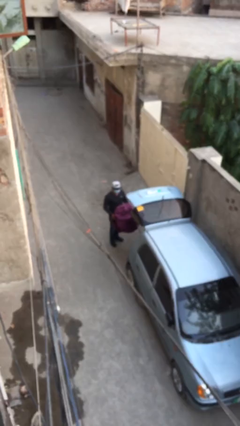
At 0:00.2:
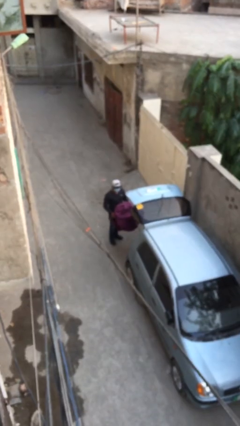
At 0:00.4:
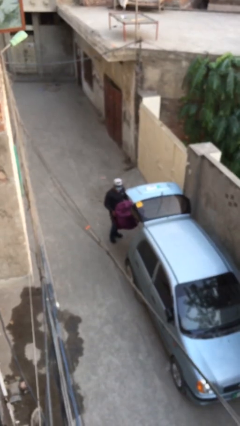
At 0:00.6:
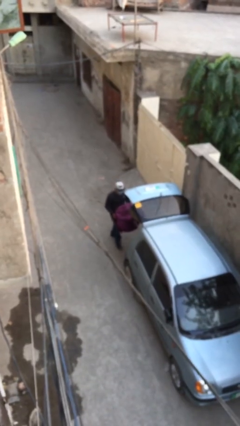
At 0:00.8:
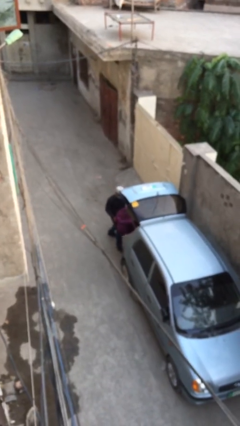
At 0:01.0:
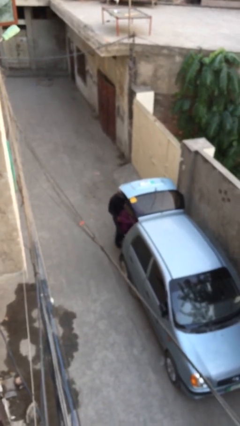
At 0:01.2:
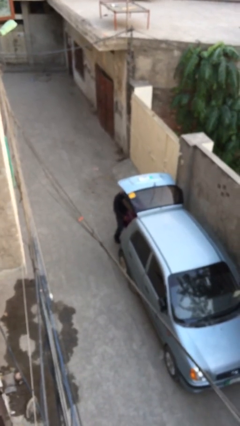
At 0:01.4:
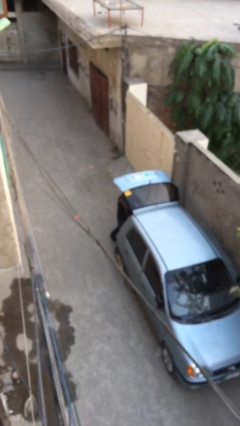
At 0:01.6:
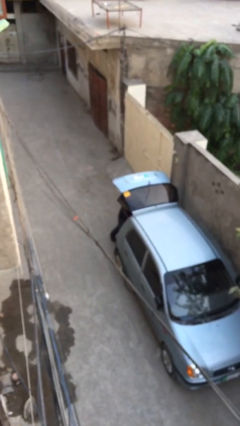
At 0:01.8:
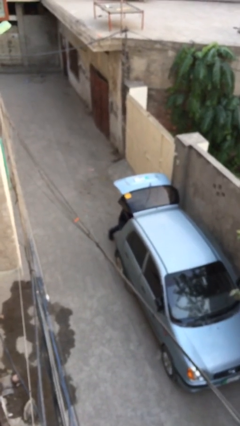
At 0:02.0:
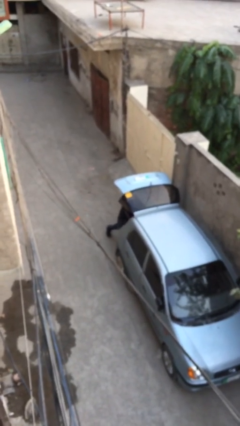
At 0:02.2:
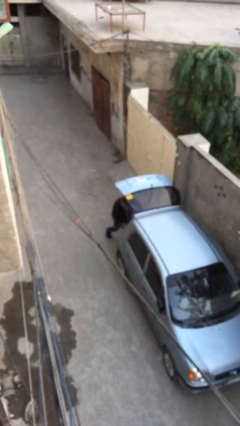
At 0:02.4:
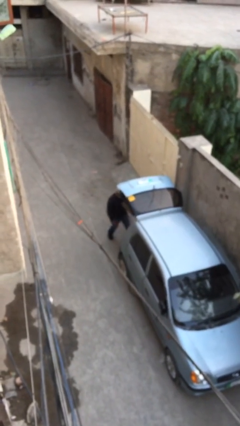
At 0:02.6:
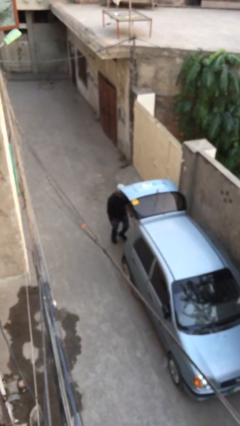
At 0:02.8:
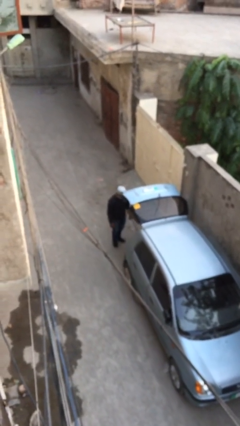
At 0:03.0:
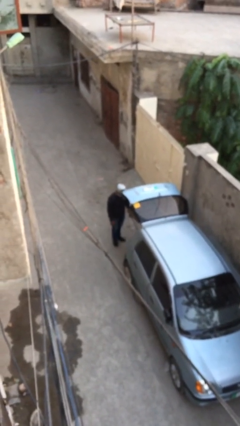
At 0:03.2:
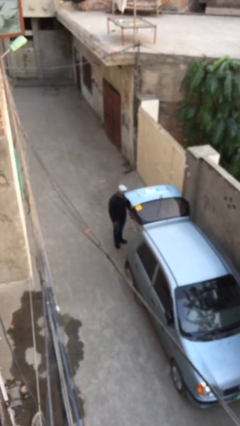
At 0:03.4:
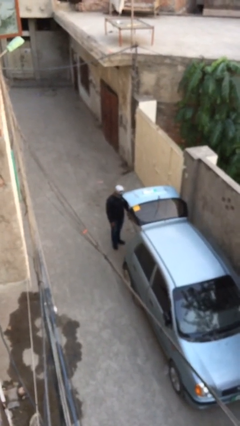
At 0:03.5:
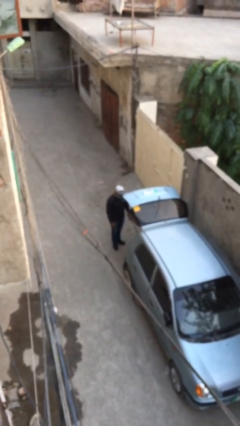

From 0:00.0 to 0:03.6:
person loads car

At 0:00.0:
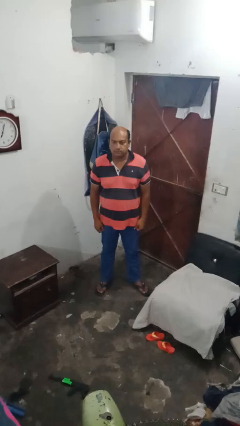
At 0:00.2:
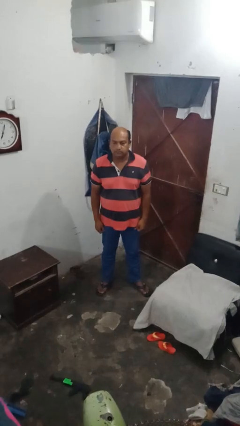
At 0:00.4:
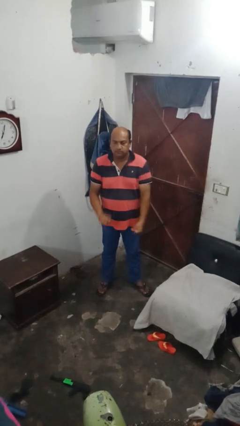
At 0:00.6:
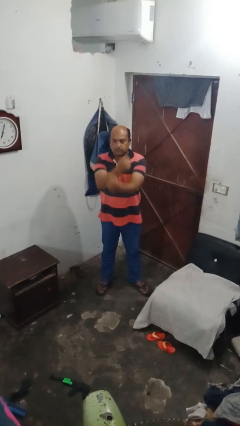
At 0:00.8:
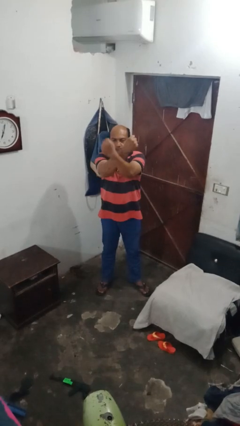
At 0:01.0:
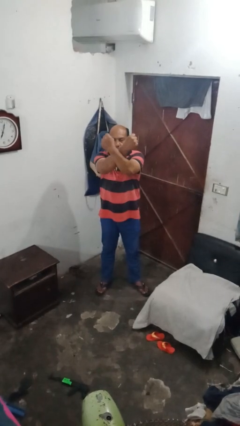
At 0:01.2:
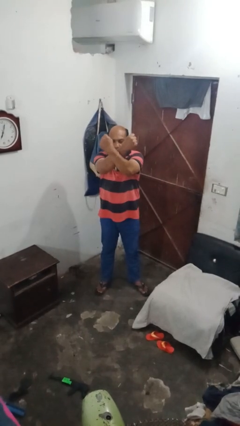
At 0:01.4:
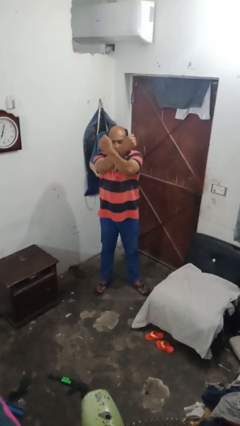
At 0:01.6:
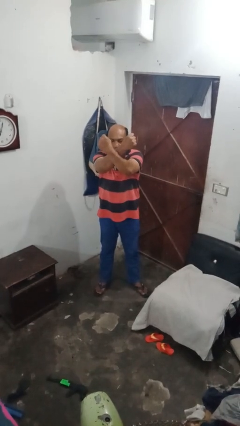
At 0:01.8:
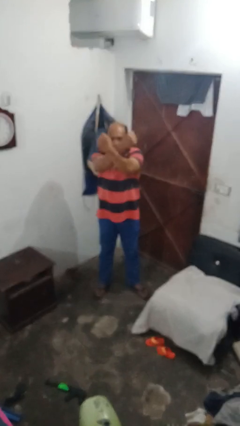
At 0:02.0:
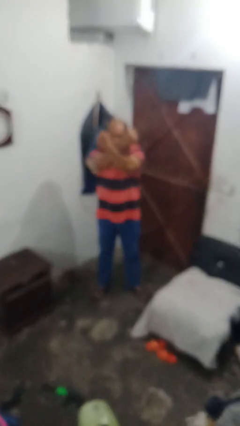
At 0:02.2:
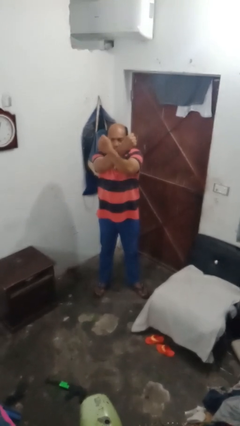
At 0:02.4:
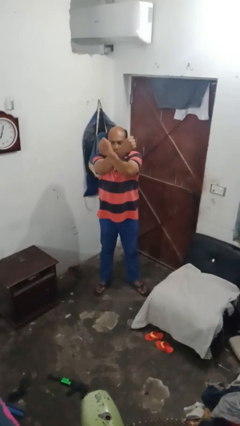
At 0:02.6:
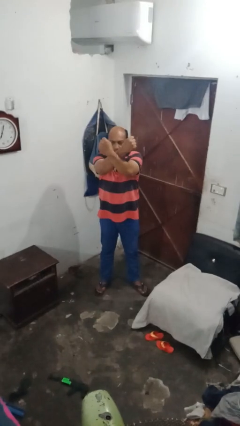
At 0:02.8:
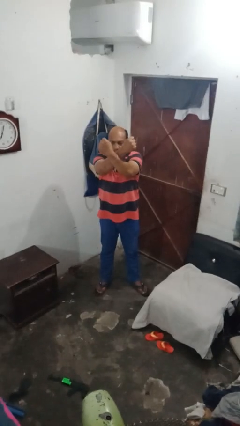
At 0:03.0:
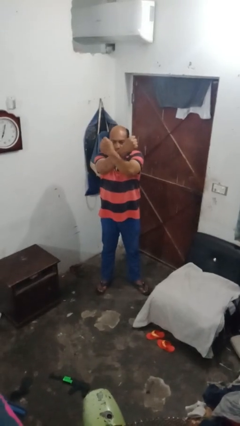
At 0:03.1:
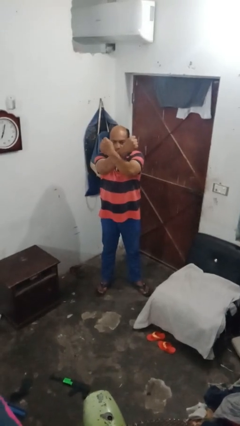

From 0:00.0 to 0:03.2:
person gestures arms x

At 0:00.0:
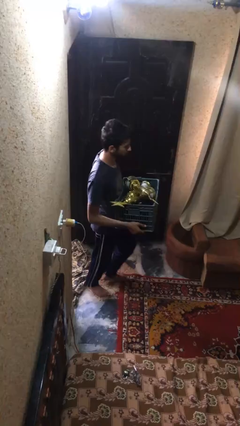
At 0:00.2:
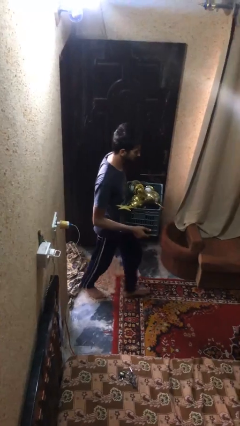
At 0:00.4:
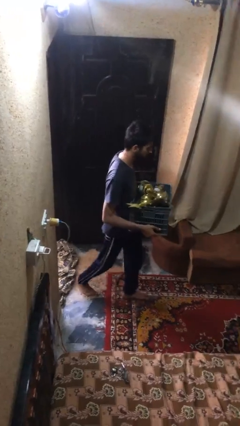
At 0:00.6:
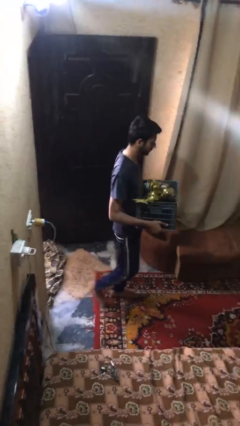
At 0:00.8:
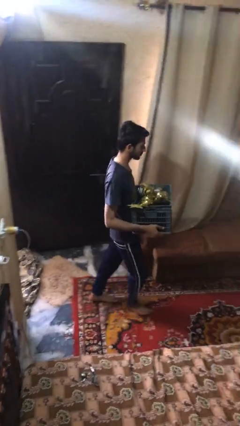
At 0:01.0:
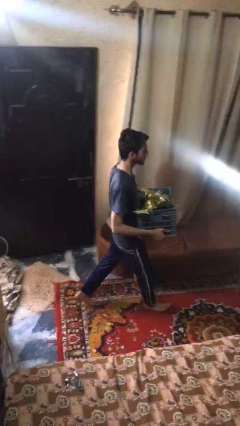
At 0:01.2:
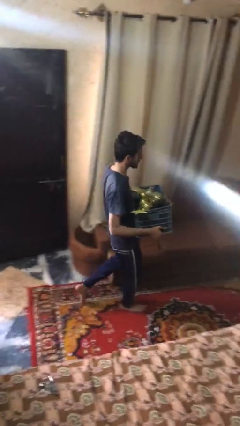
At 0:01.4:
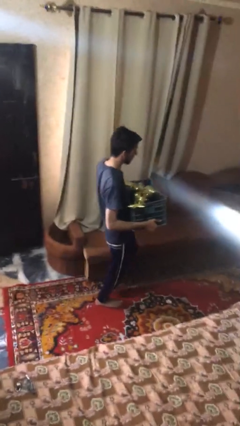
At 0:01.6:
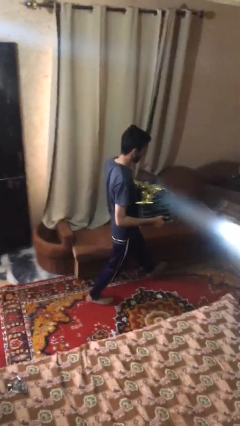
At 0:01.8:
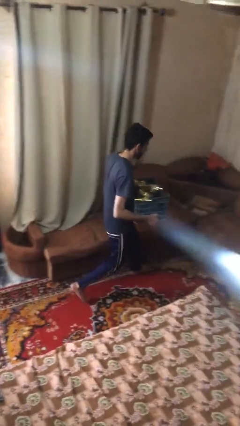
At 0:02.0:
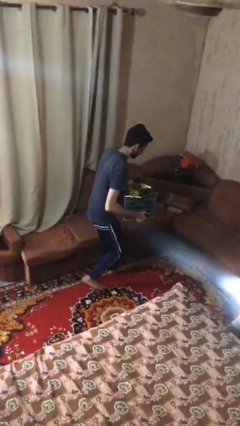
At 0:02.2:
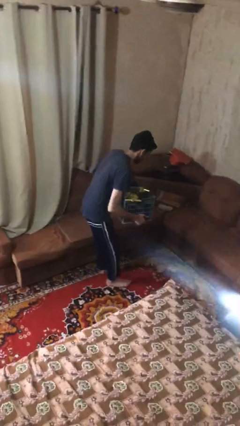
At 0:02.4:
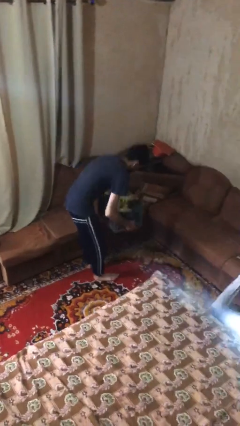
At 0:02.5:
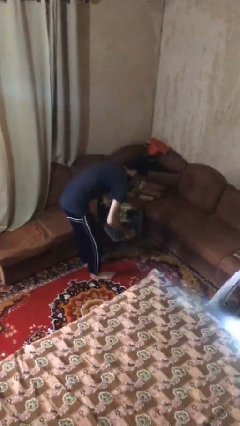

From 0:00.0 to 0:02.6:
person carries heavy object

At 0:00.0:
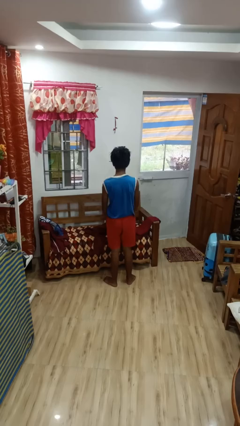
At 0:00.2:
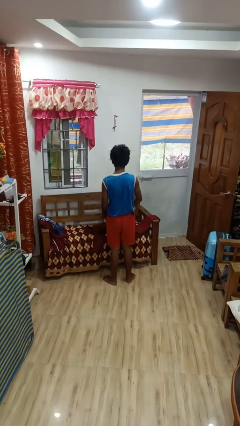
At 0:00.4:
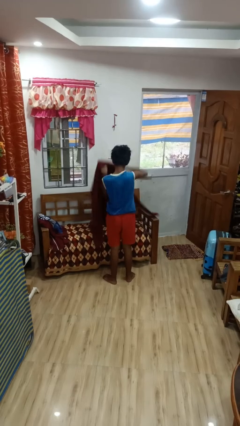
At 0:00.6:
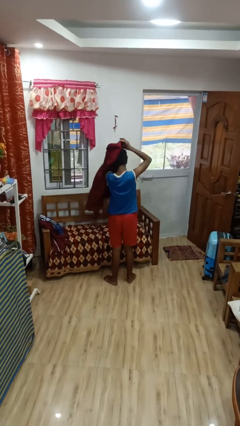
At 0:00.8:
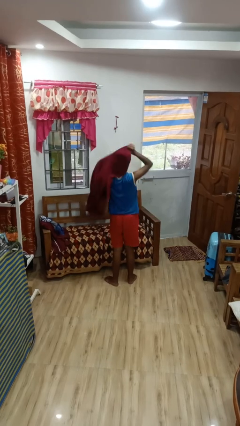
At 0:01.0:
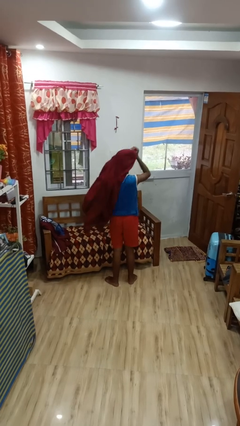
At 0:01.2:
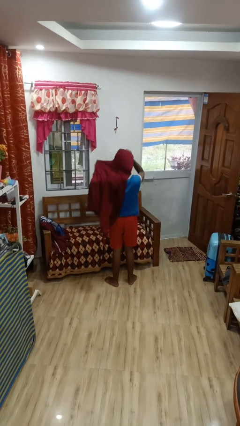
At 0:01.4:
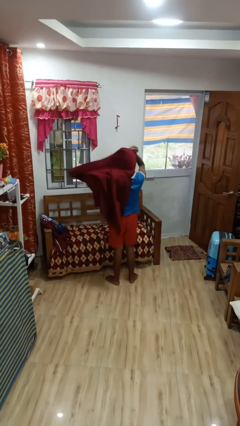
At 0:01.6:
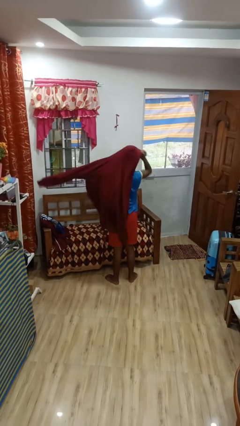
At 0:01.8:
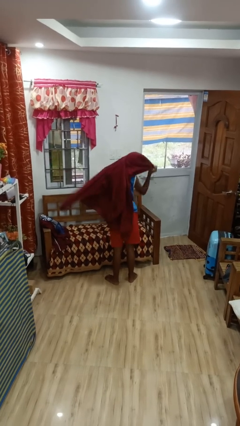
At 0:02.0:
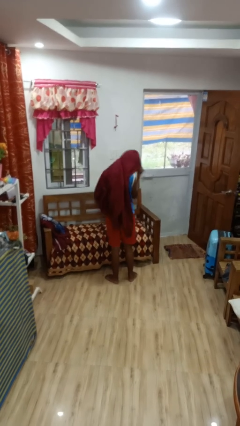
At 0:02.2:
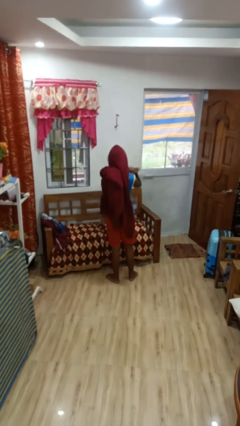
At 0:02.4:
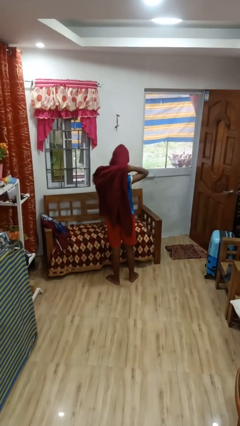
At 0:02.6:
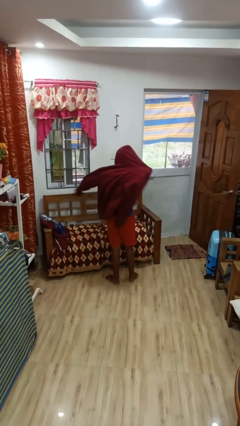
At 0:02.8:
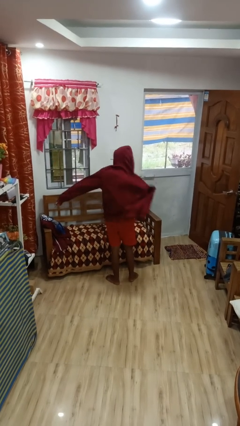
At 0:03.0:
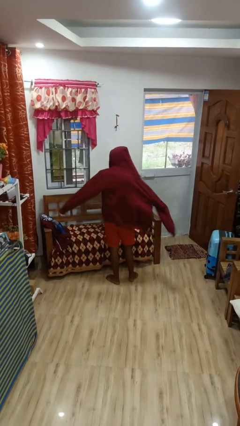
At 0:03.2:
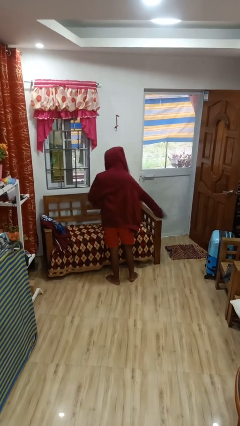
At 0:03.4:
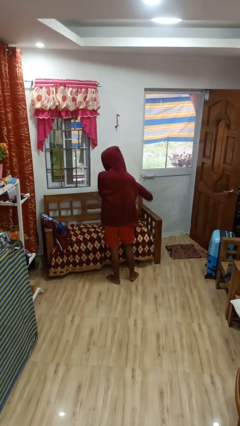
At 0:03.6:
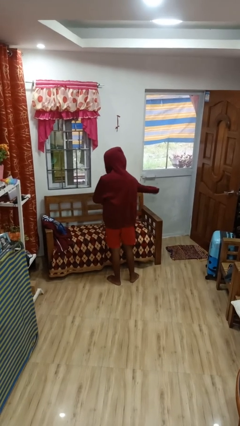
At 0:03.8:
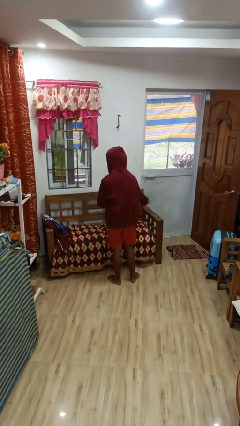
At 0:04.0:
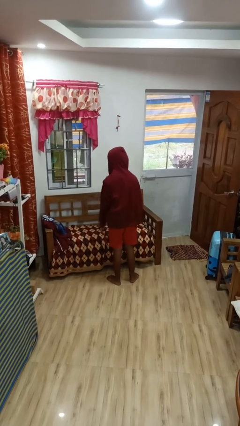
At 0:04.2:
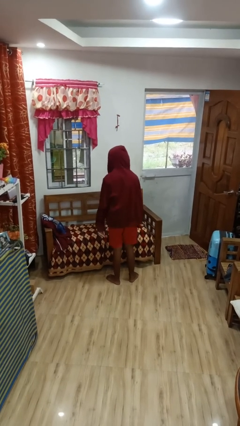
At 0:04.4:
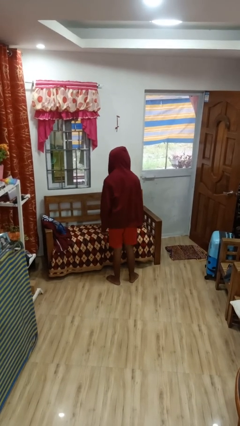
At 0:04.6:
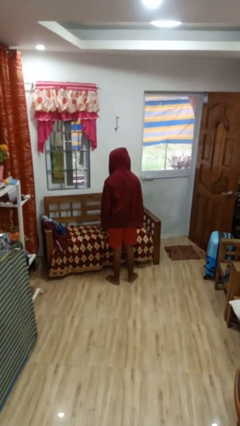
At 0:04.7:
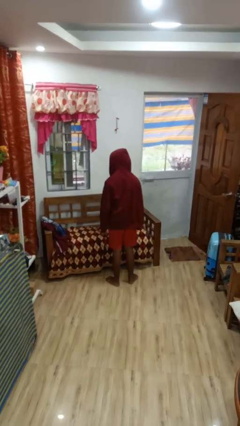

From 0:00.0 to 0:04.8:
person puts on hoodie

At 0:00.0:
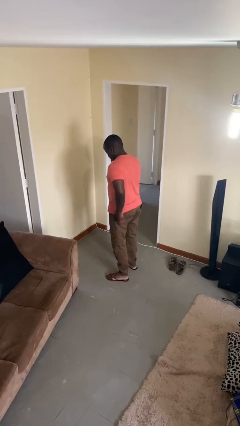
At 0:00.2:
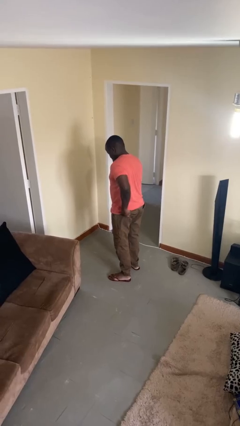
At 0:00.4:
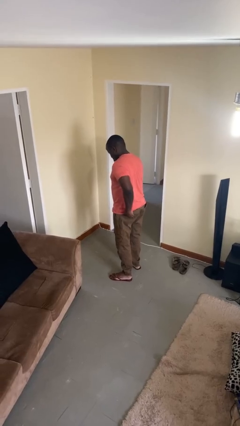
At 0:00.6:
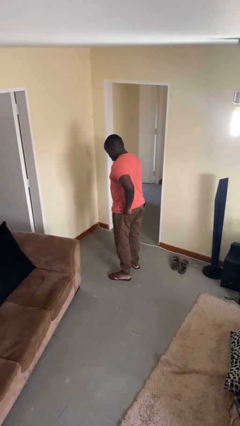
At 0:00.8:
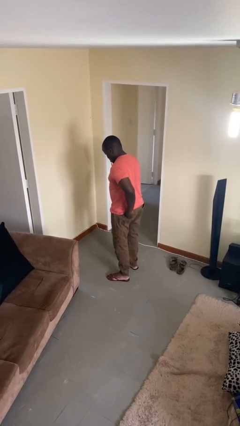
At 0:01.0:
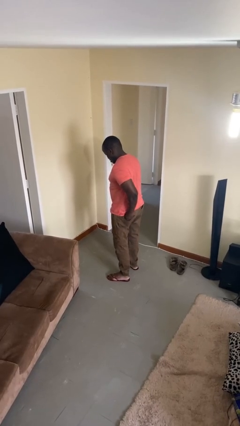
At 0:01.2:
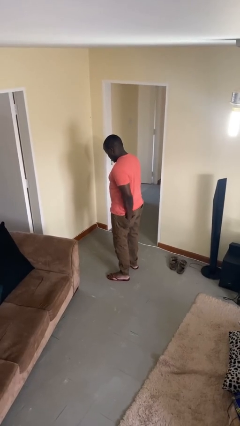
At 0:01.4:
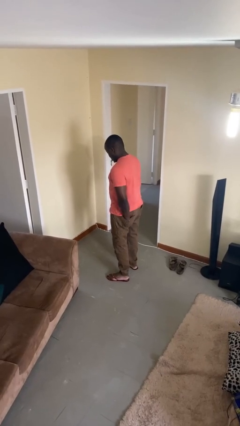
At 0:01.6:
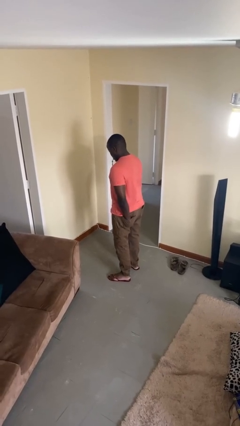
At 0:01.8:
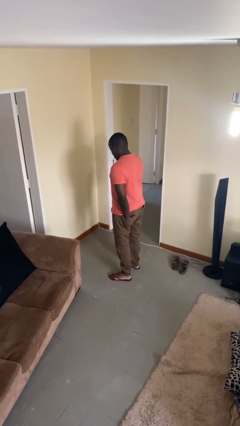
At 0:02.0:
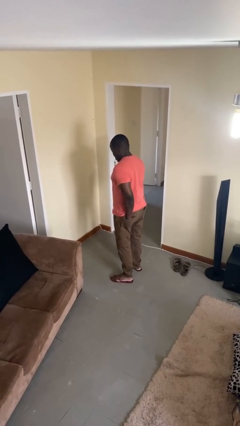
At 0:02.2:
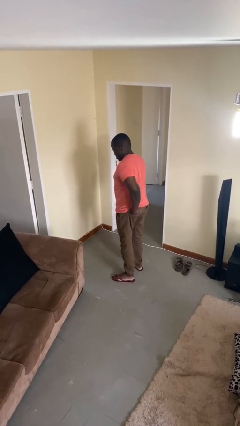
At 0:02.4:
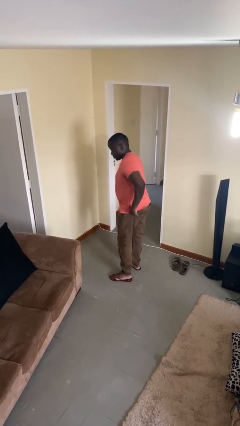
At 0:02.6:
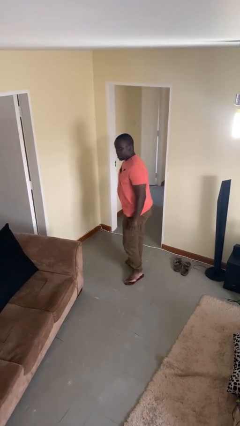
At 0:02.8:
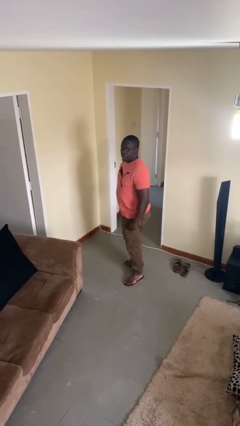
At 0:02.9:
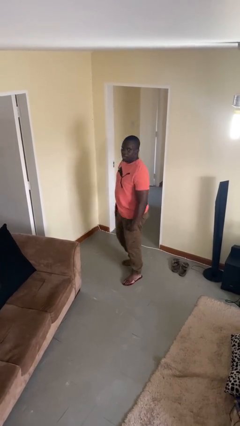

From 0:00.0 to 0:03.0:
person puts hands in back pockets

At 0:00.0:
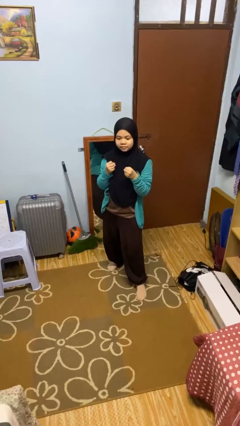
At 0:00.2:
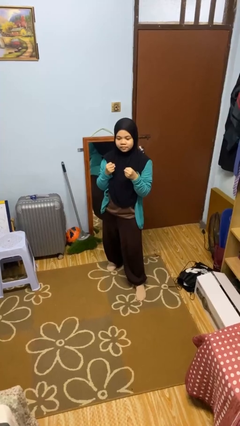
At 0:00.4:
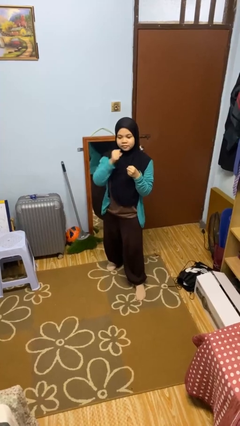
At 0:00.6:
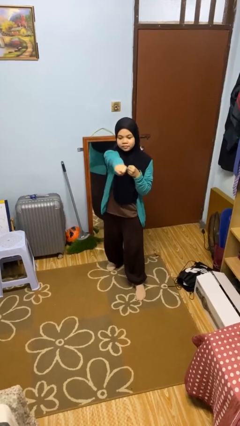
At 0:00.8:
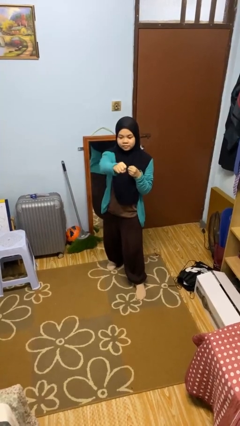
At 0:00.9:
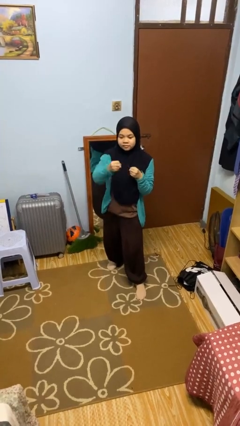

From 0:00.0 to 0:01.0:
person punches
